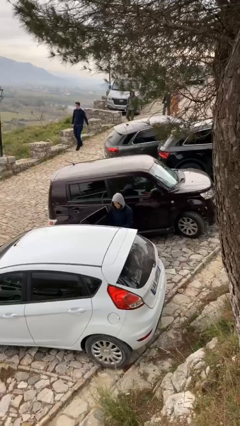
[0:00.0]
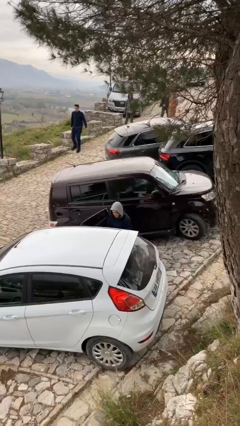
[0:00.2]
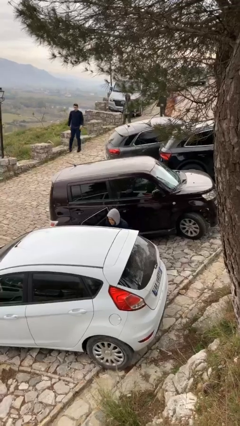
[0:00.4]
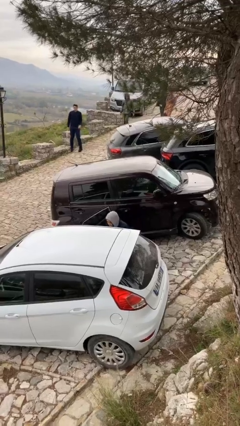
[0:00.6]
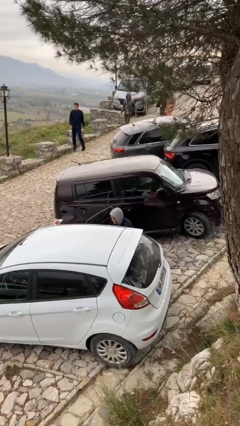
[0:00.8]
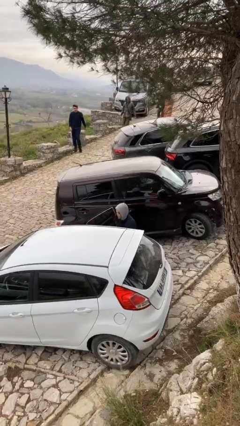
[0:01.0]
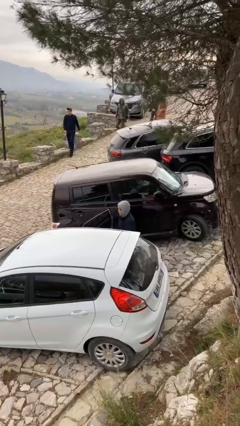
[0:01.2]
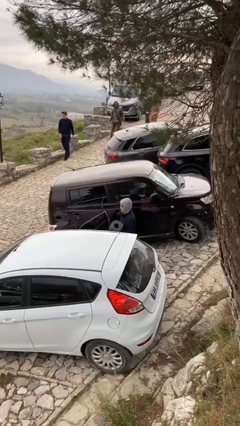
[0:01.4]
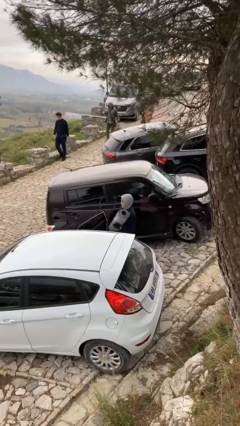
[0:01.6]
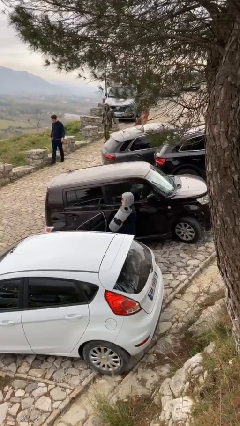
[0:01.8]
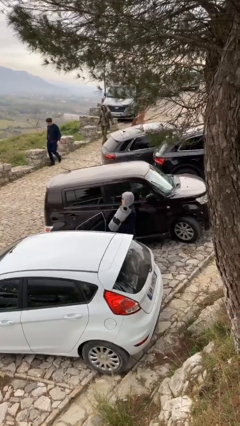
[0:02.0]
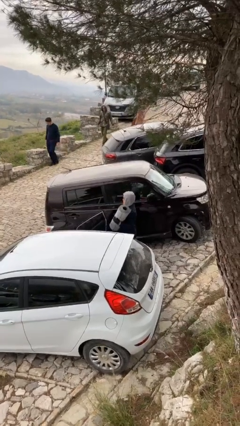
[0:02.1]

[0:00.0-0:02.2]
person unloads car

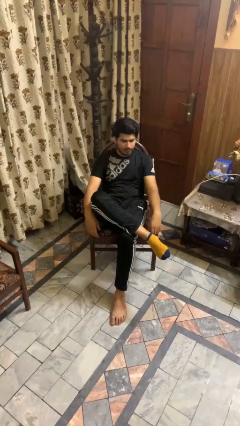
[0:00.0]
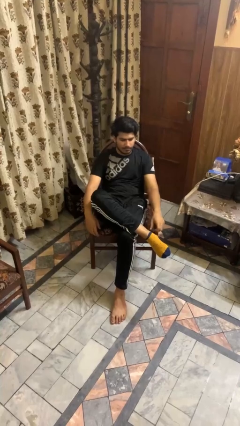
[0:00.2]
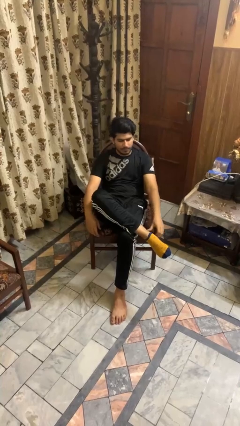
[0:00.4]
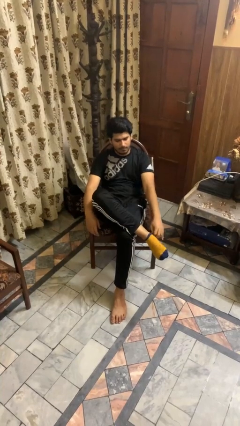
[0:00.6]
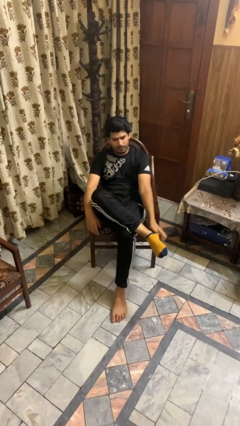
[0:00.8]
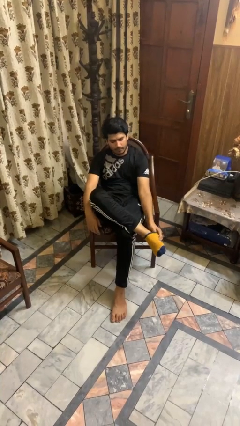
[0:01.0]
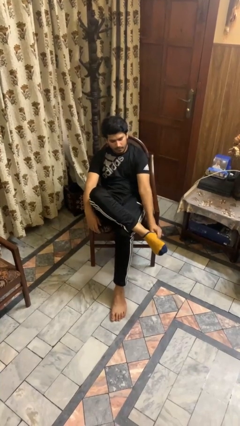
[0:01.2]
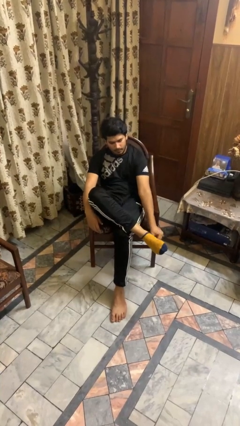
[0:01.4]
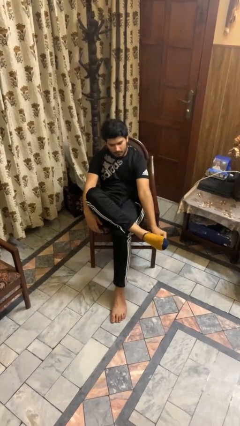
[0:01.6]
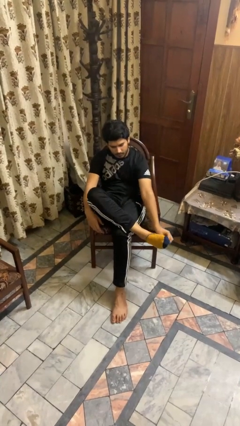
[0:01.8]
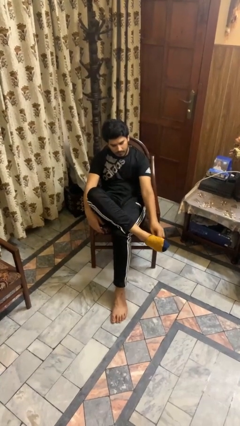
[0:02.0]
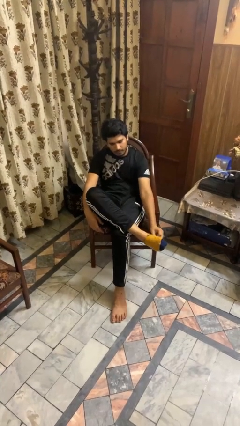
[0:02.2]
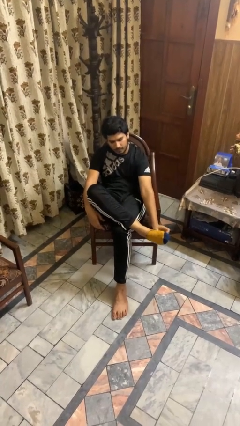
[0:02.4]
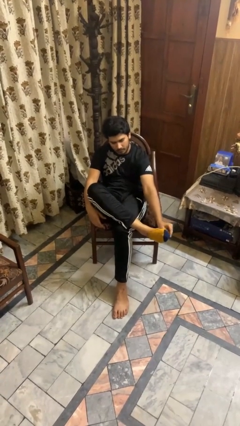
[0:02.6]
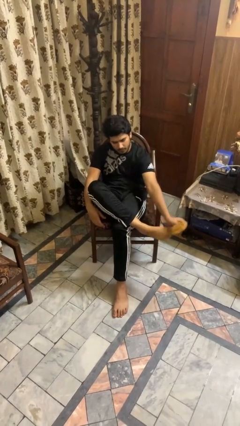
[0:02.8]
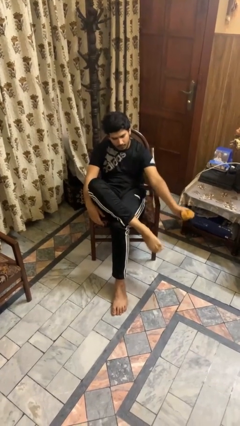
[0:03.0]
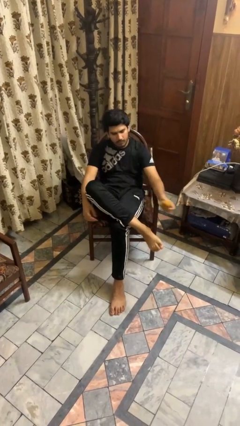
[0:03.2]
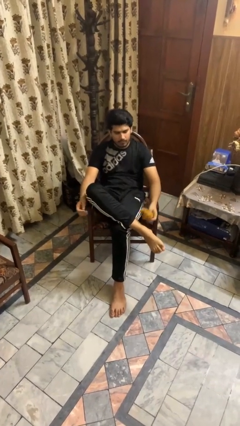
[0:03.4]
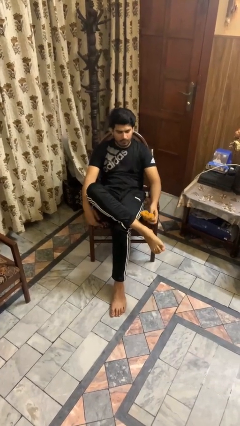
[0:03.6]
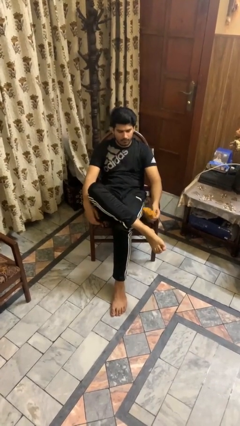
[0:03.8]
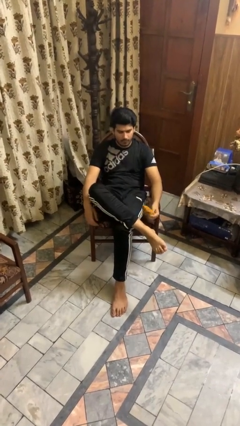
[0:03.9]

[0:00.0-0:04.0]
person takes off socks

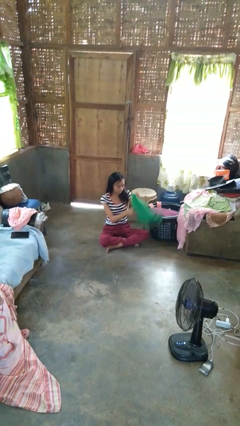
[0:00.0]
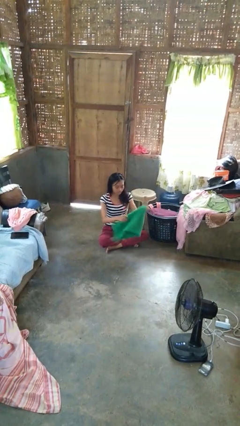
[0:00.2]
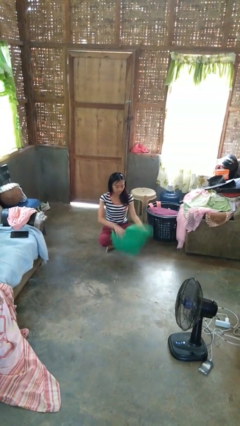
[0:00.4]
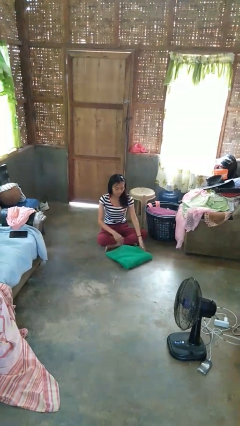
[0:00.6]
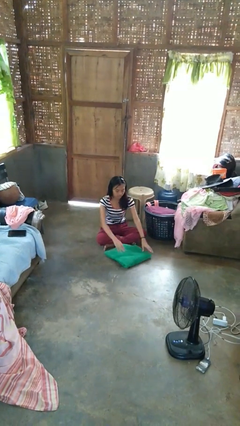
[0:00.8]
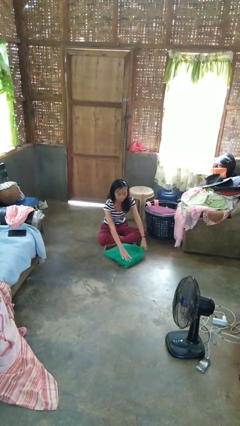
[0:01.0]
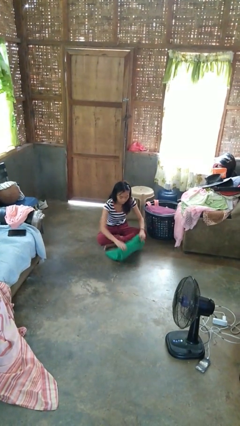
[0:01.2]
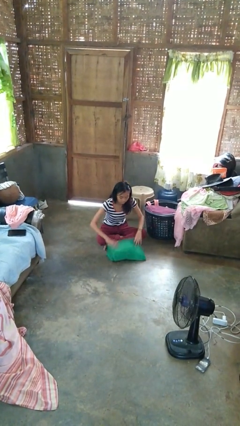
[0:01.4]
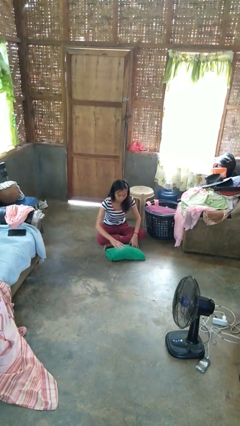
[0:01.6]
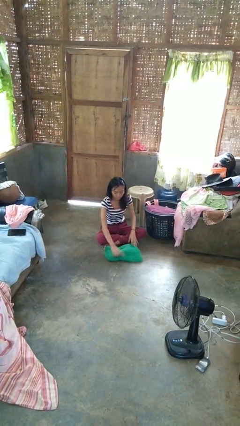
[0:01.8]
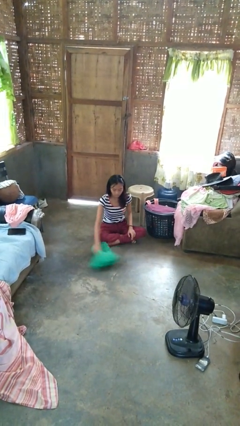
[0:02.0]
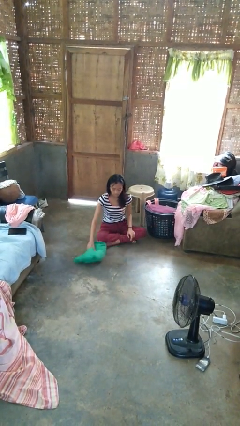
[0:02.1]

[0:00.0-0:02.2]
person folds towel

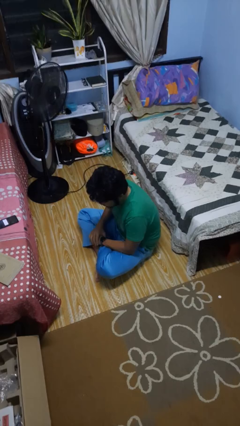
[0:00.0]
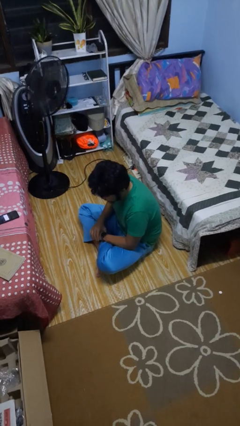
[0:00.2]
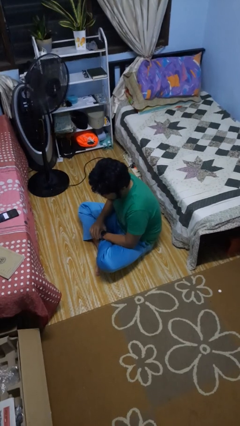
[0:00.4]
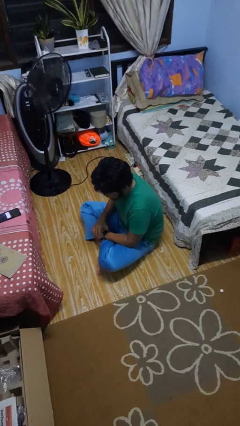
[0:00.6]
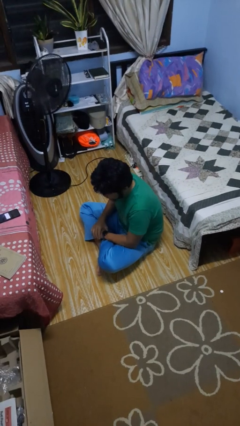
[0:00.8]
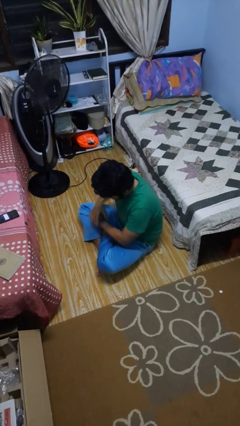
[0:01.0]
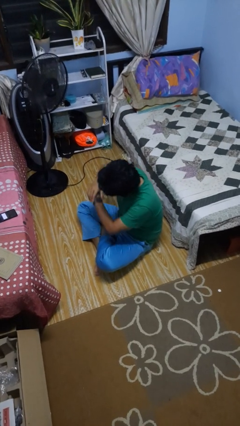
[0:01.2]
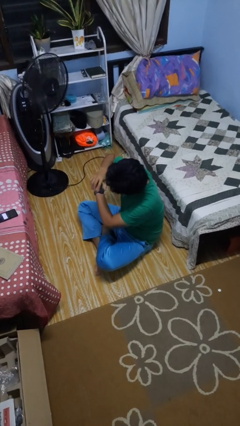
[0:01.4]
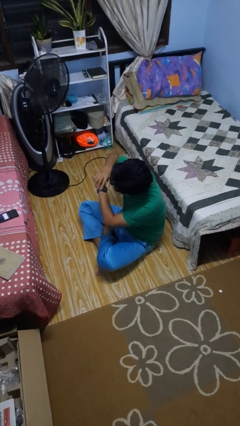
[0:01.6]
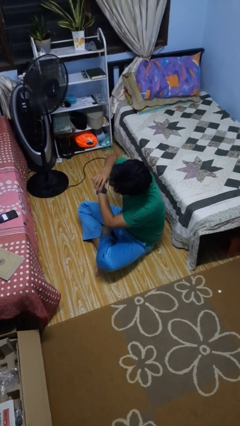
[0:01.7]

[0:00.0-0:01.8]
person looks at wristwatch

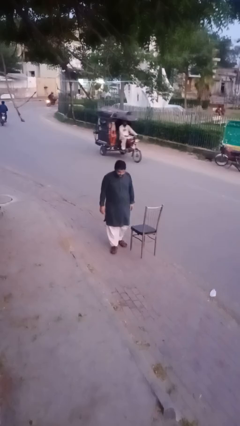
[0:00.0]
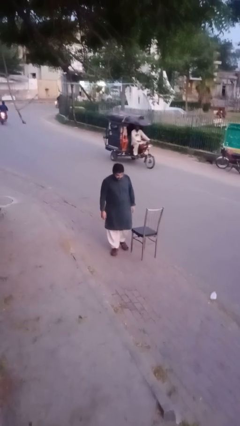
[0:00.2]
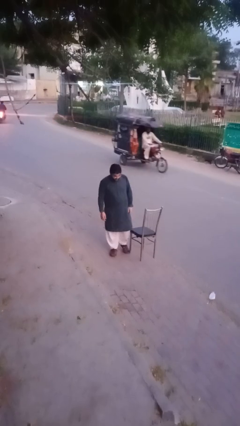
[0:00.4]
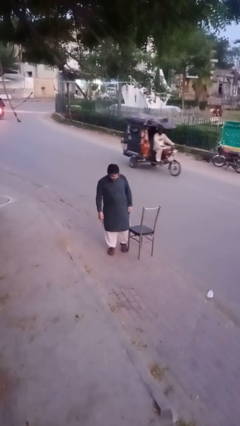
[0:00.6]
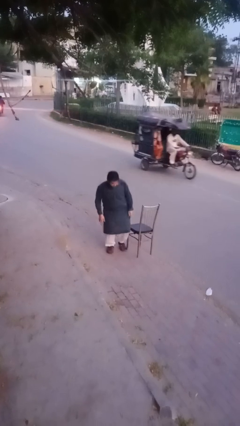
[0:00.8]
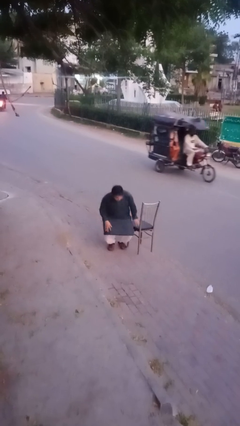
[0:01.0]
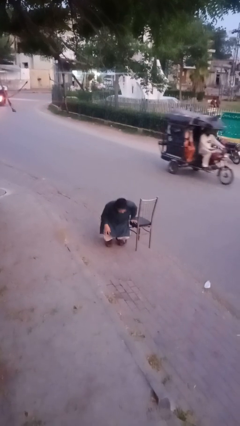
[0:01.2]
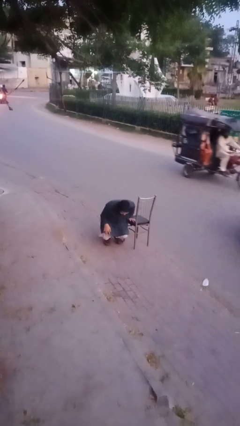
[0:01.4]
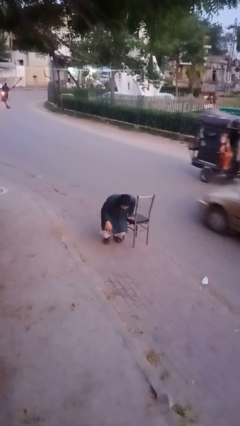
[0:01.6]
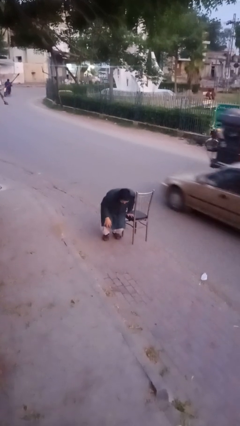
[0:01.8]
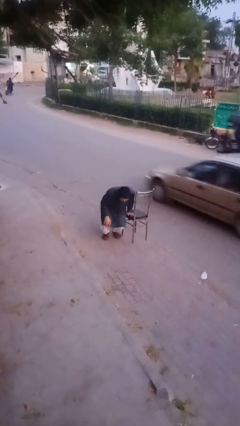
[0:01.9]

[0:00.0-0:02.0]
person lies down on floor

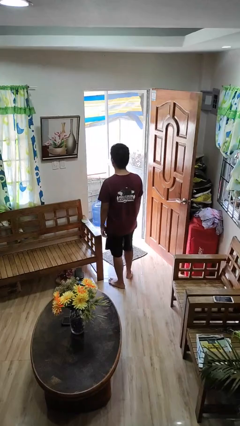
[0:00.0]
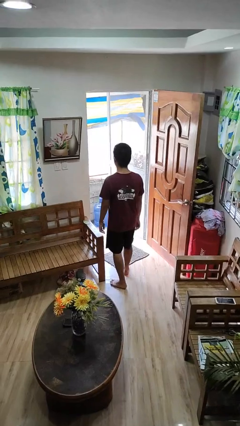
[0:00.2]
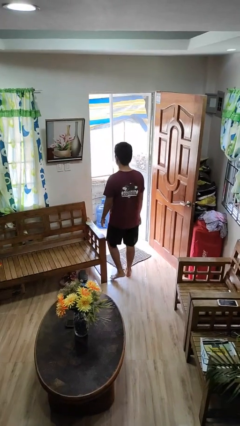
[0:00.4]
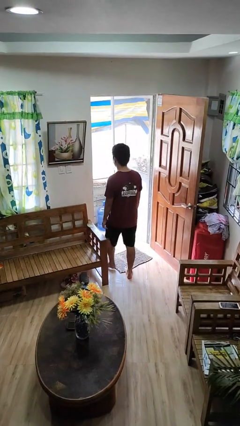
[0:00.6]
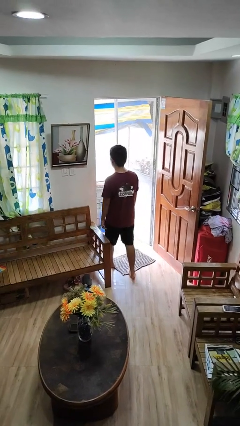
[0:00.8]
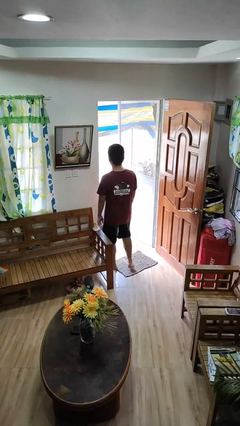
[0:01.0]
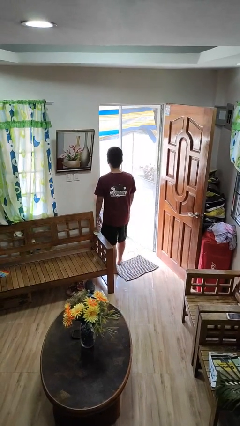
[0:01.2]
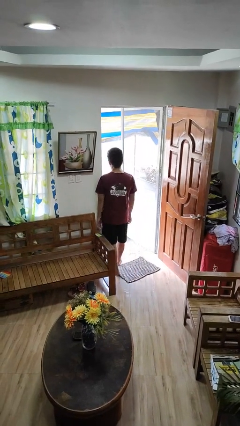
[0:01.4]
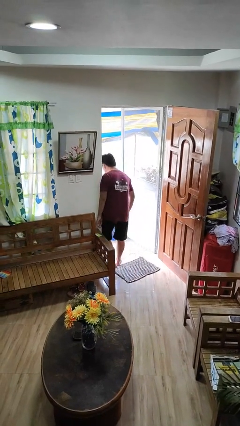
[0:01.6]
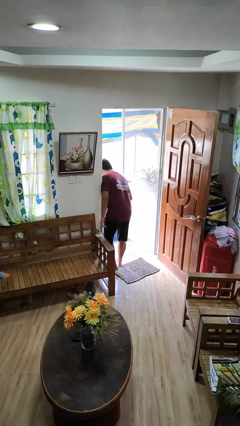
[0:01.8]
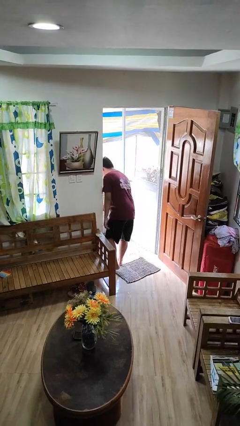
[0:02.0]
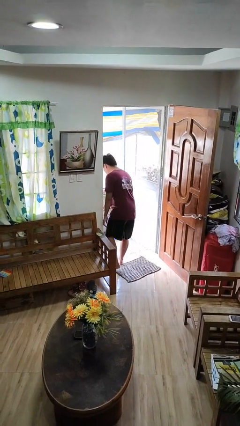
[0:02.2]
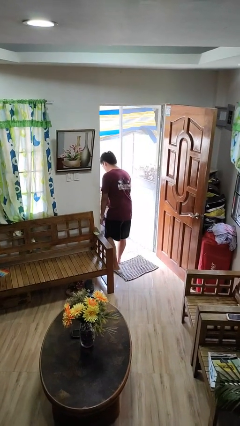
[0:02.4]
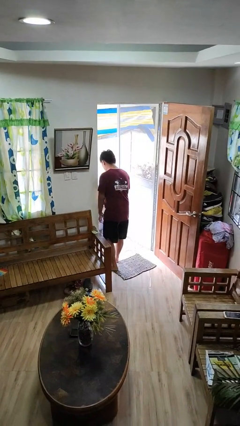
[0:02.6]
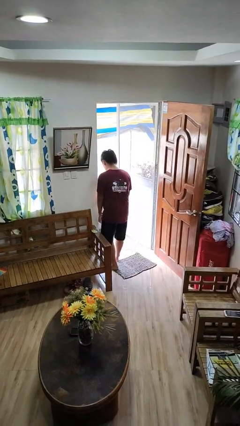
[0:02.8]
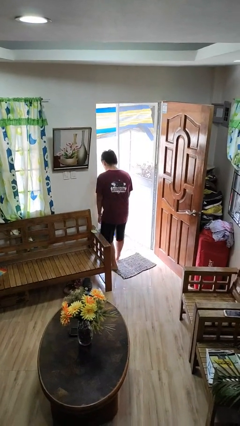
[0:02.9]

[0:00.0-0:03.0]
person bumps into wall

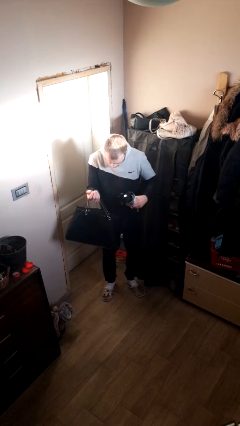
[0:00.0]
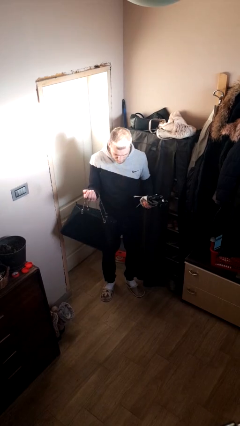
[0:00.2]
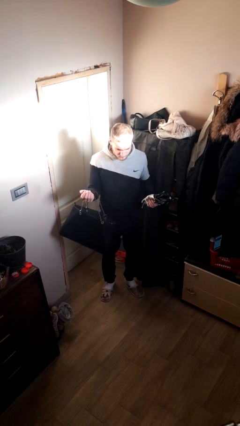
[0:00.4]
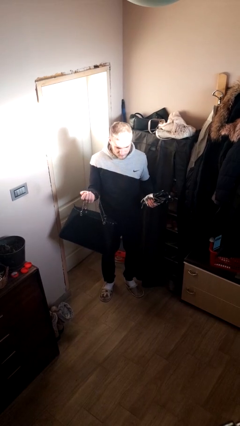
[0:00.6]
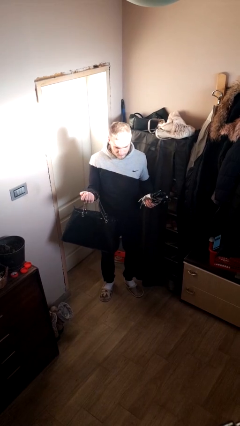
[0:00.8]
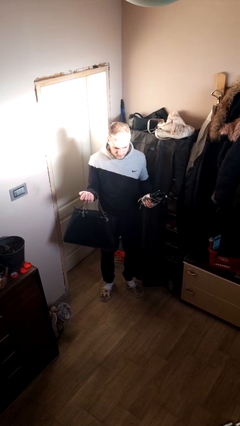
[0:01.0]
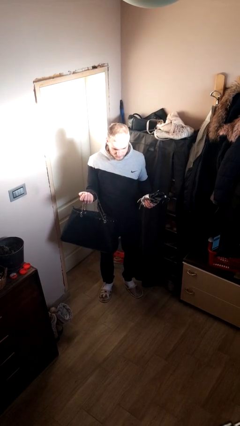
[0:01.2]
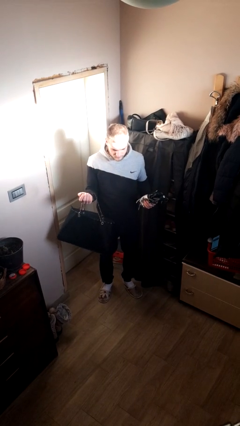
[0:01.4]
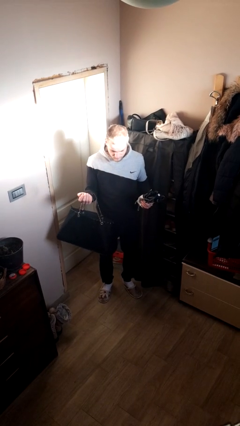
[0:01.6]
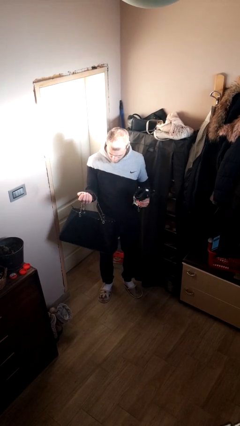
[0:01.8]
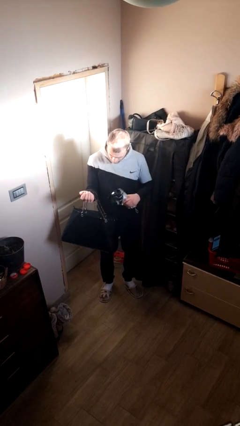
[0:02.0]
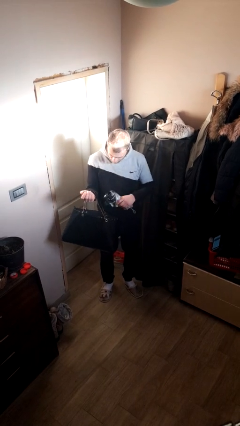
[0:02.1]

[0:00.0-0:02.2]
person takes object from purse
